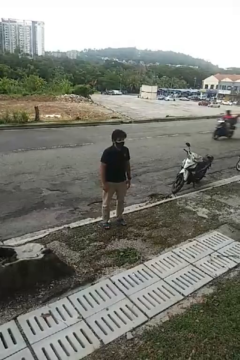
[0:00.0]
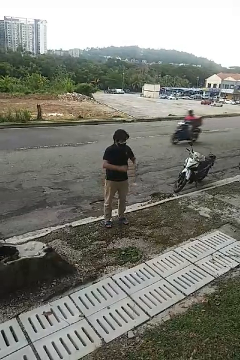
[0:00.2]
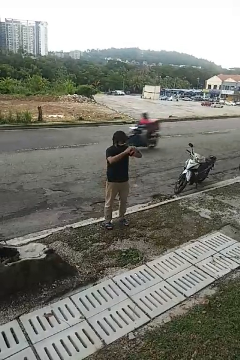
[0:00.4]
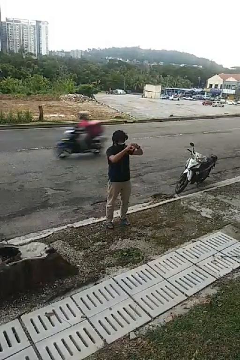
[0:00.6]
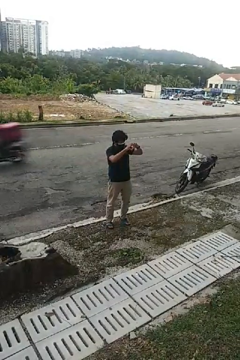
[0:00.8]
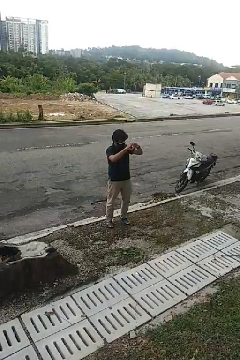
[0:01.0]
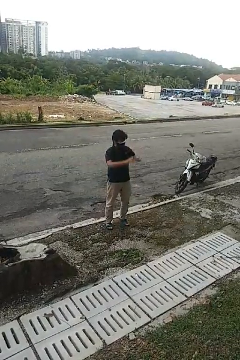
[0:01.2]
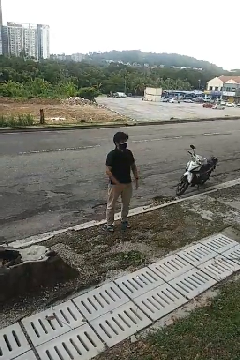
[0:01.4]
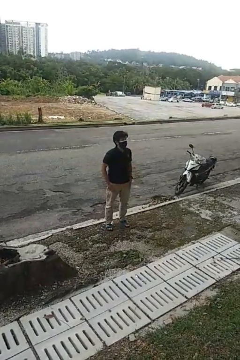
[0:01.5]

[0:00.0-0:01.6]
person gestures heart

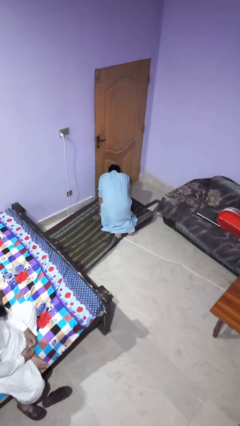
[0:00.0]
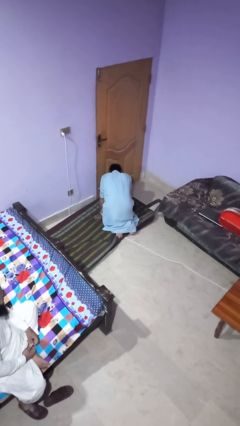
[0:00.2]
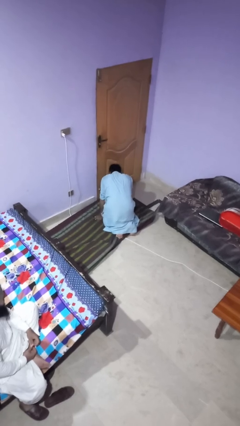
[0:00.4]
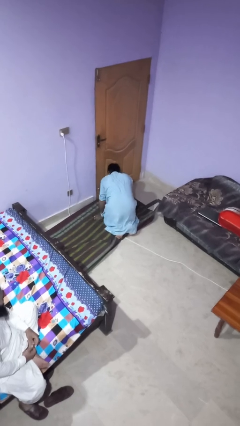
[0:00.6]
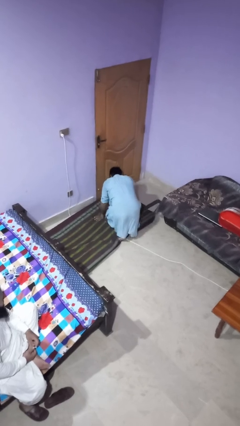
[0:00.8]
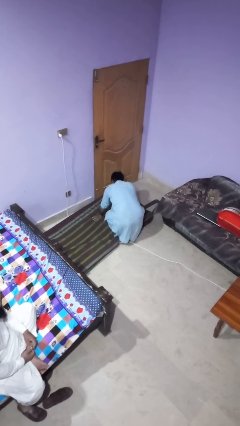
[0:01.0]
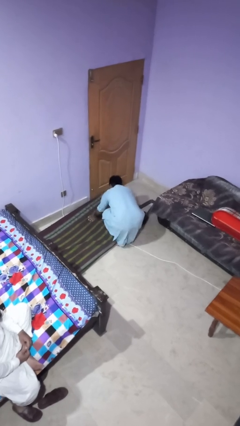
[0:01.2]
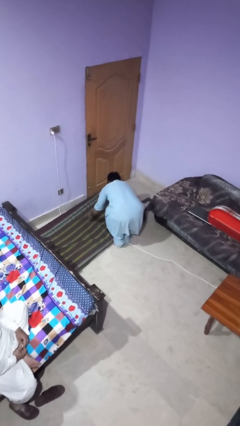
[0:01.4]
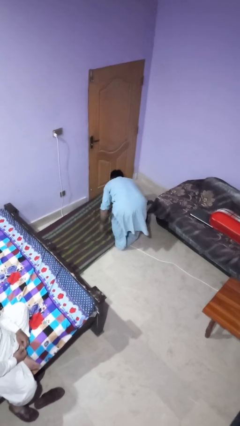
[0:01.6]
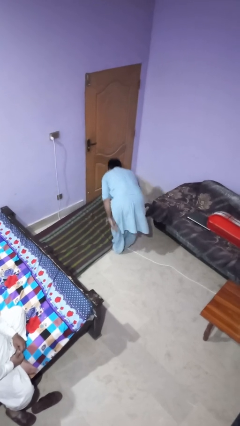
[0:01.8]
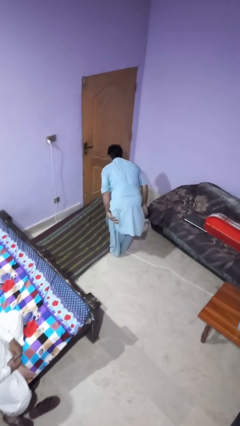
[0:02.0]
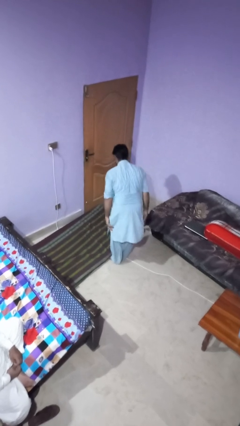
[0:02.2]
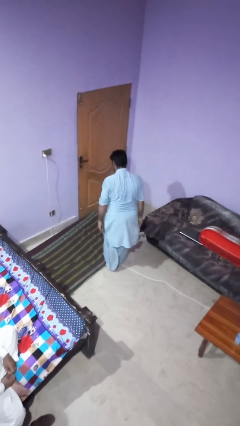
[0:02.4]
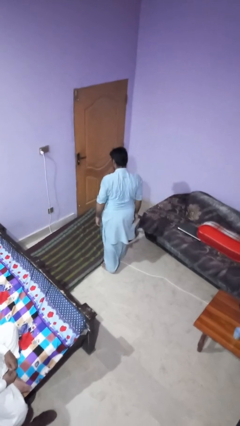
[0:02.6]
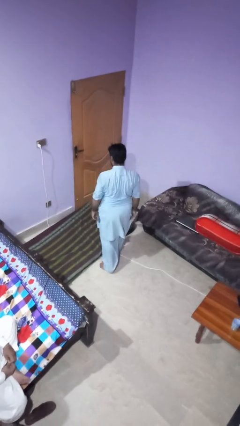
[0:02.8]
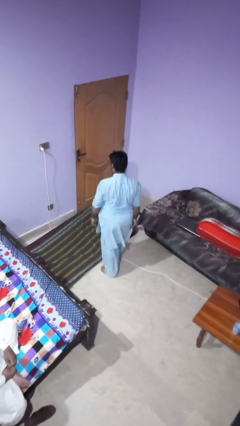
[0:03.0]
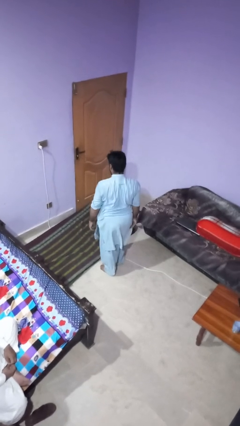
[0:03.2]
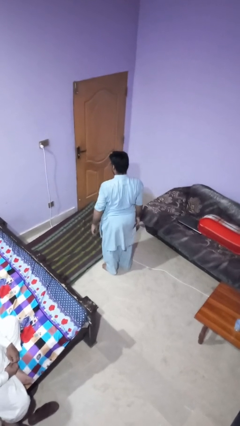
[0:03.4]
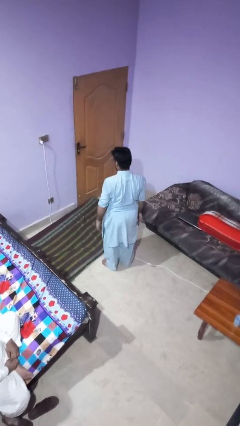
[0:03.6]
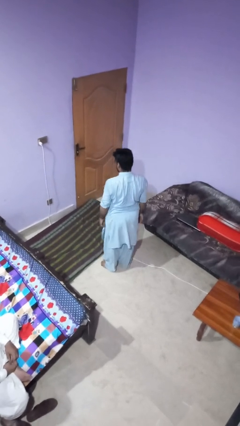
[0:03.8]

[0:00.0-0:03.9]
person stands up from floor

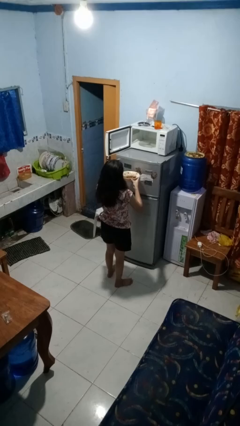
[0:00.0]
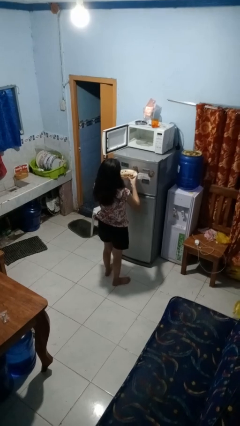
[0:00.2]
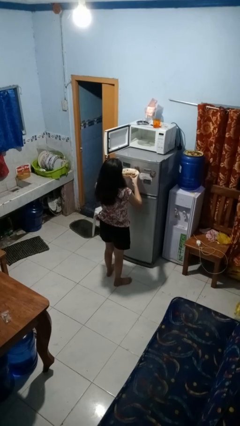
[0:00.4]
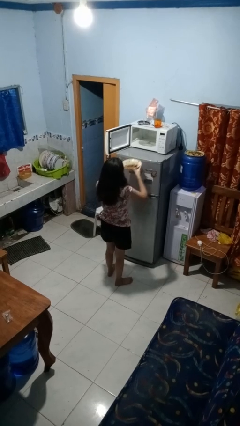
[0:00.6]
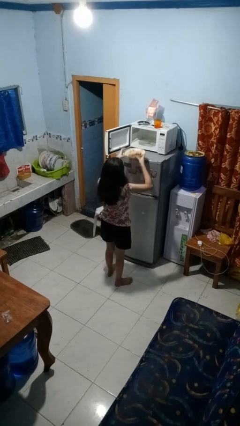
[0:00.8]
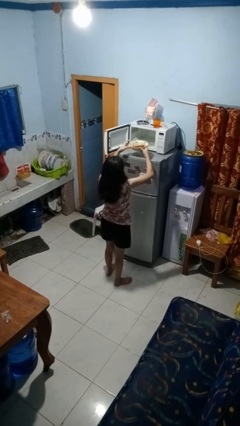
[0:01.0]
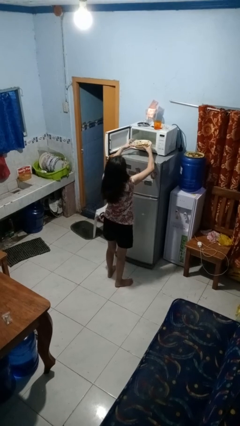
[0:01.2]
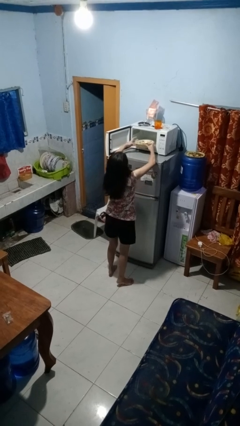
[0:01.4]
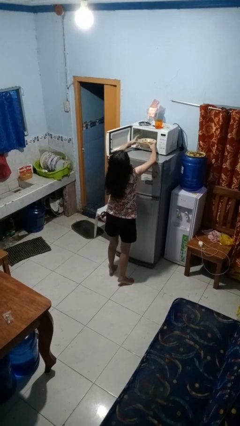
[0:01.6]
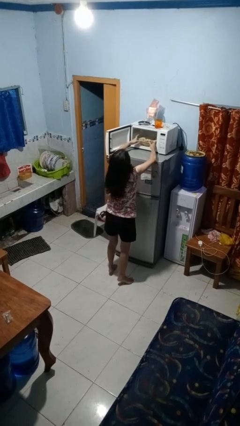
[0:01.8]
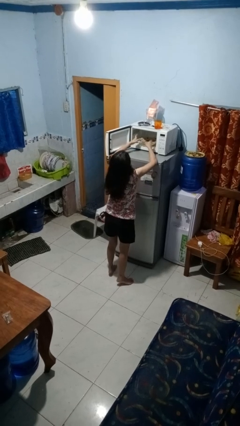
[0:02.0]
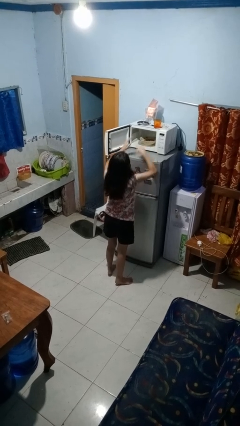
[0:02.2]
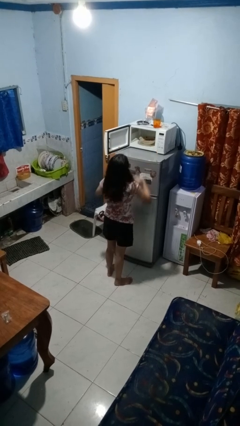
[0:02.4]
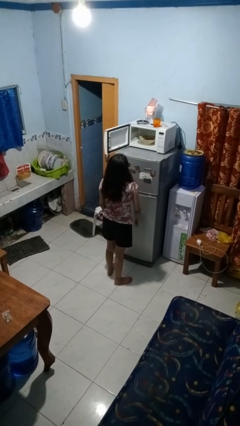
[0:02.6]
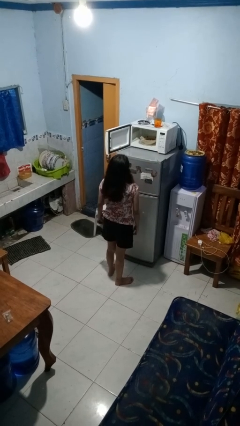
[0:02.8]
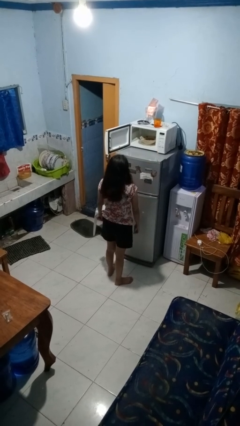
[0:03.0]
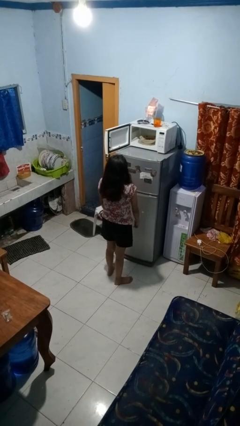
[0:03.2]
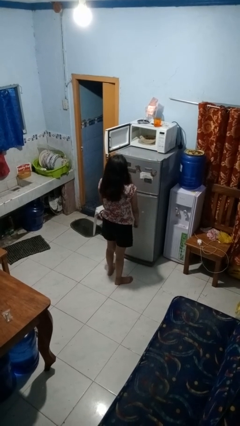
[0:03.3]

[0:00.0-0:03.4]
person puts object into microwave

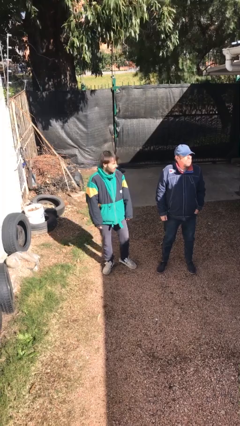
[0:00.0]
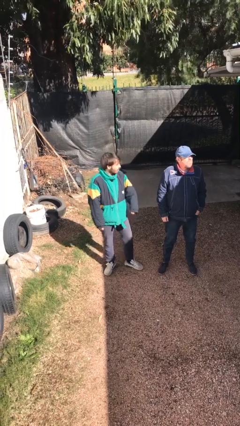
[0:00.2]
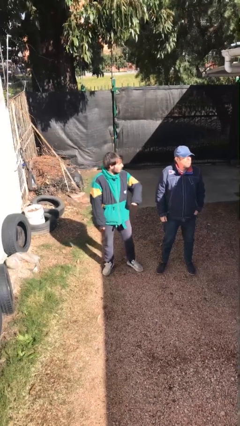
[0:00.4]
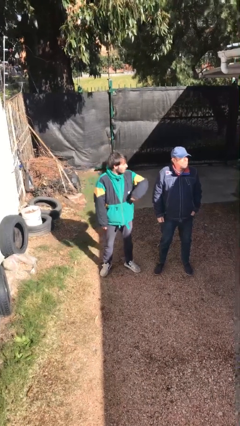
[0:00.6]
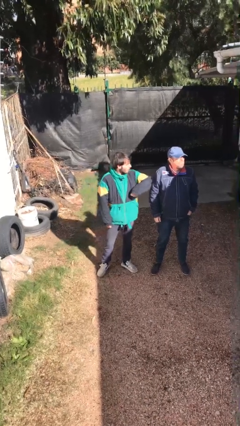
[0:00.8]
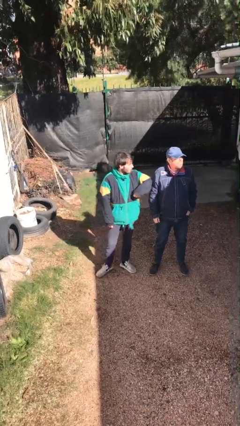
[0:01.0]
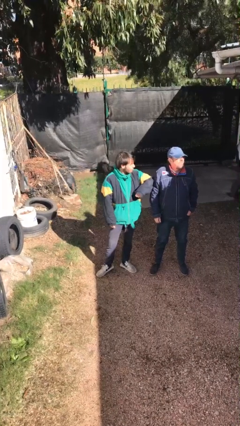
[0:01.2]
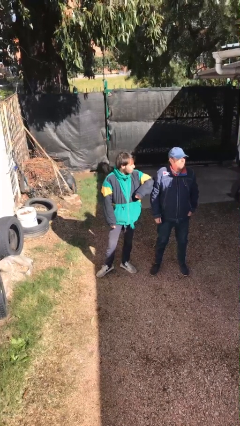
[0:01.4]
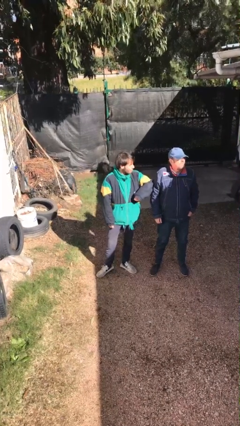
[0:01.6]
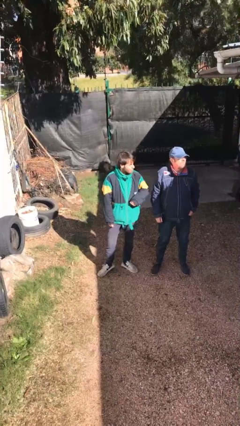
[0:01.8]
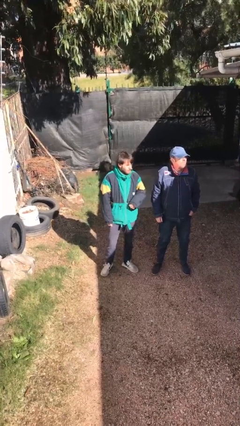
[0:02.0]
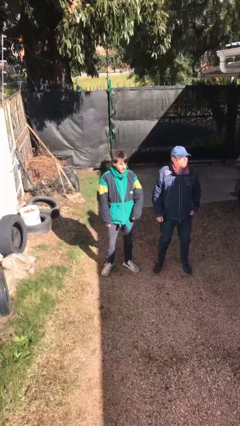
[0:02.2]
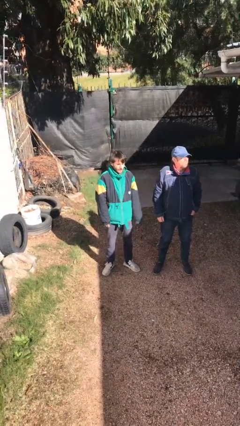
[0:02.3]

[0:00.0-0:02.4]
person nudges person with elbow

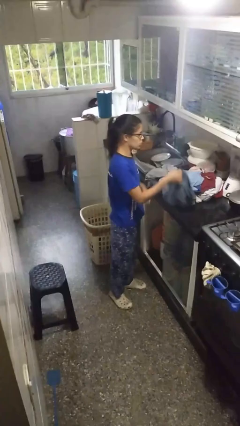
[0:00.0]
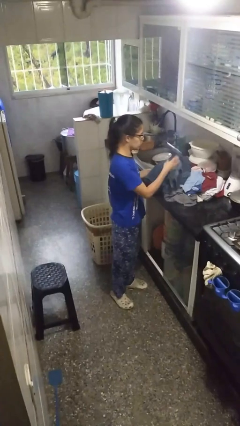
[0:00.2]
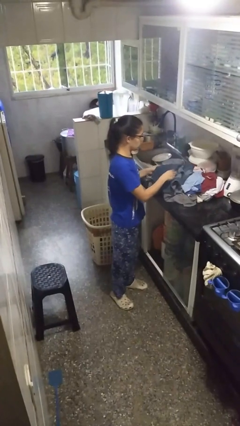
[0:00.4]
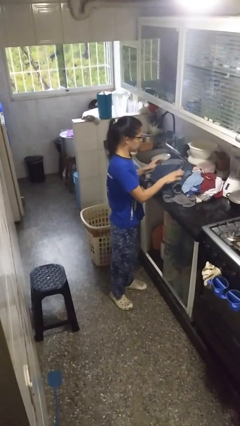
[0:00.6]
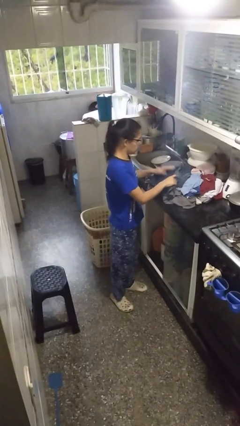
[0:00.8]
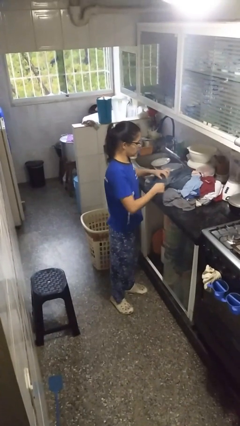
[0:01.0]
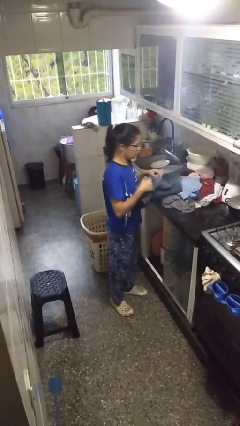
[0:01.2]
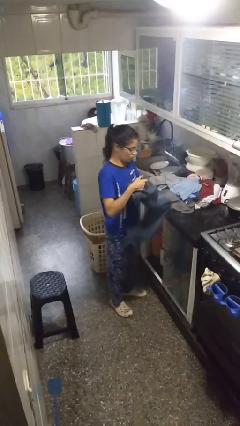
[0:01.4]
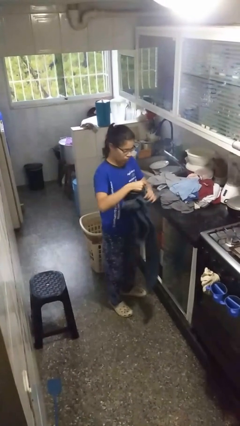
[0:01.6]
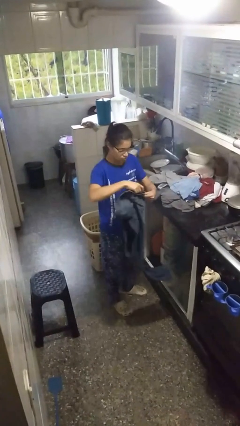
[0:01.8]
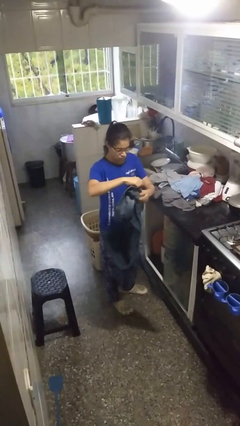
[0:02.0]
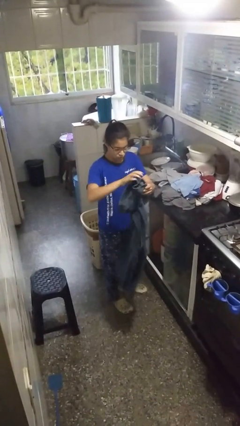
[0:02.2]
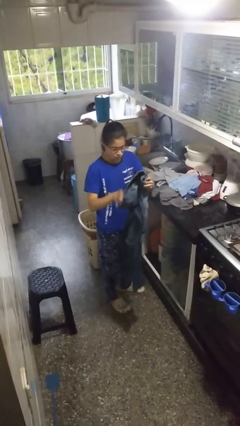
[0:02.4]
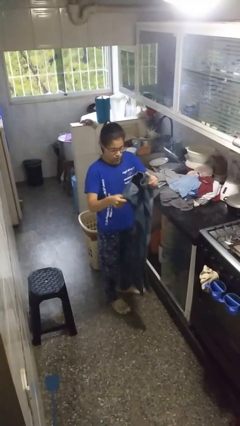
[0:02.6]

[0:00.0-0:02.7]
person folds pants

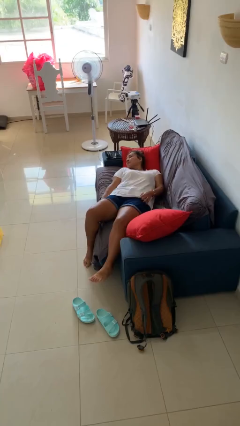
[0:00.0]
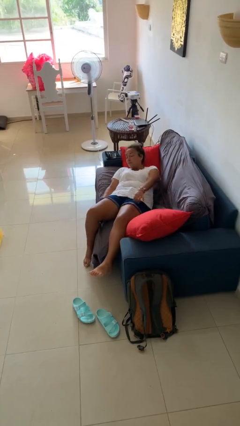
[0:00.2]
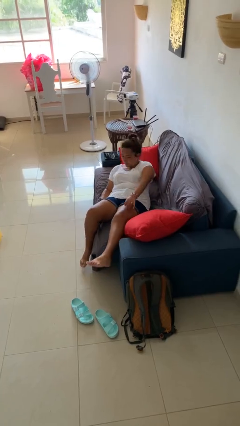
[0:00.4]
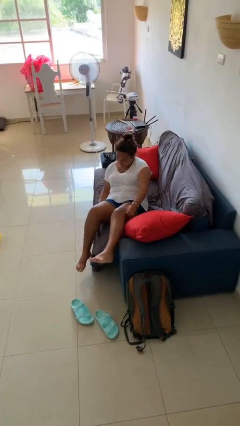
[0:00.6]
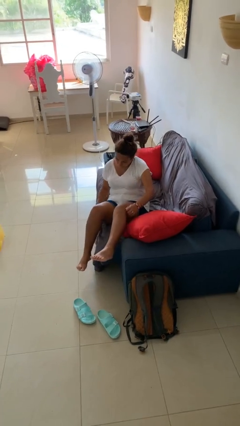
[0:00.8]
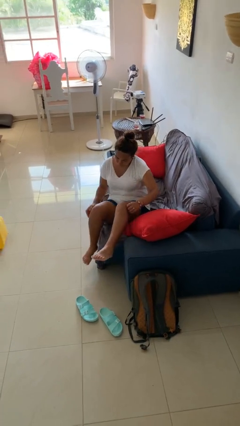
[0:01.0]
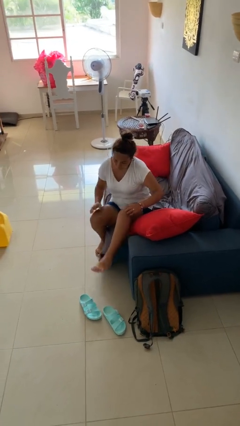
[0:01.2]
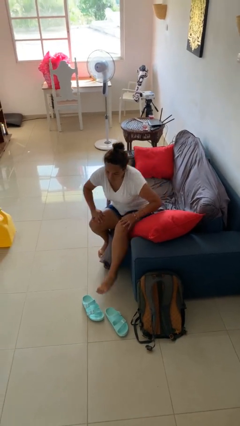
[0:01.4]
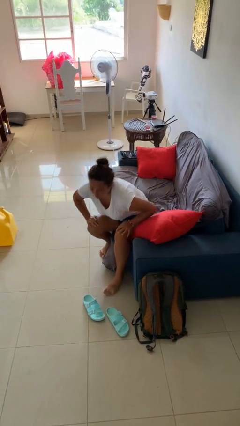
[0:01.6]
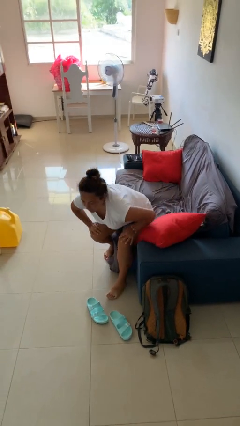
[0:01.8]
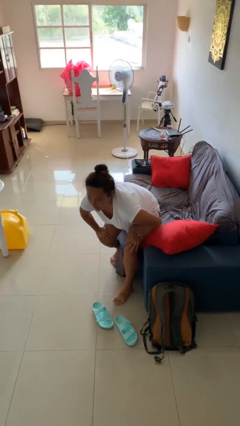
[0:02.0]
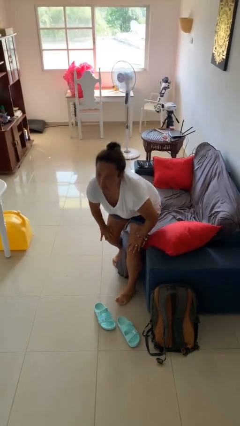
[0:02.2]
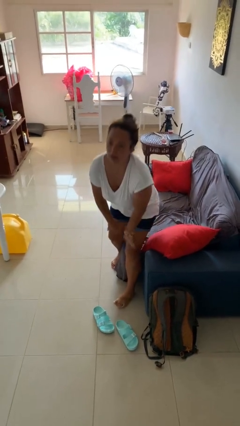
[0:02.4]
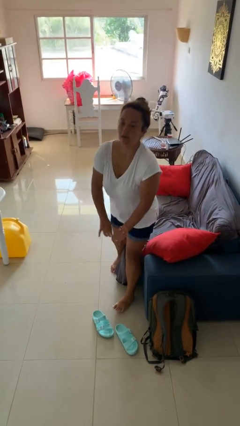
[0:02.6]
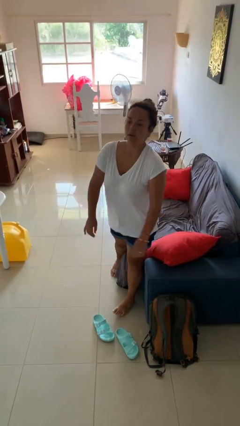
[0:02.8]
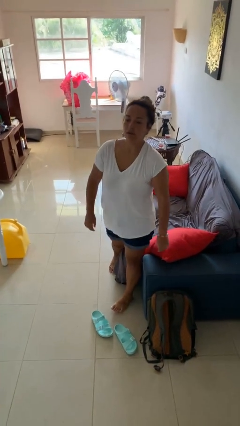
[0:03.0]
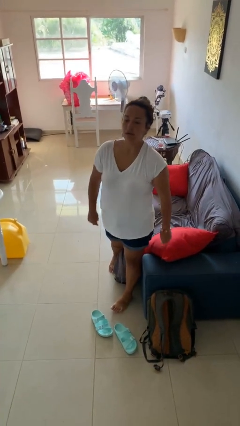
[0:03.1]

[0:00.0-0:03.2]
person stands up

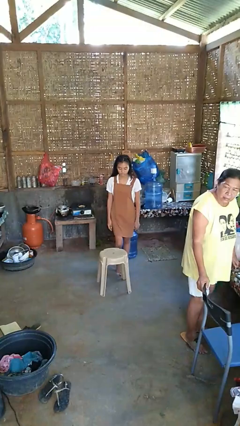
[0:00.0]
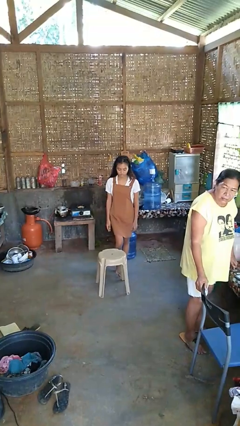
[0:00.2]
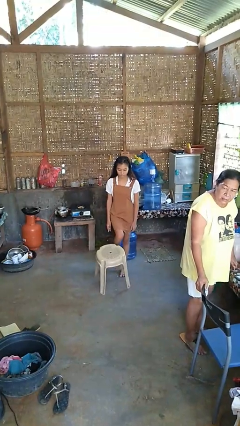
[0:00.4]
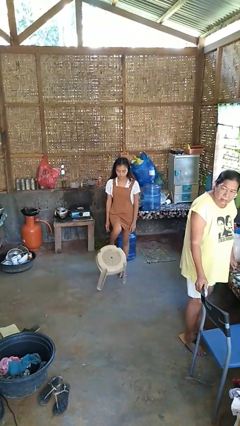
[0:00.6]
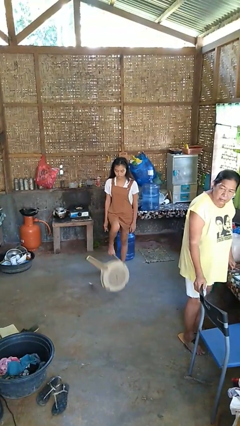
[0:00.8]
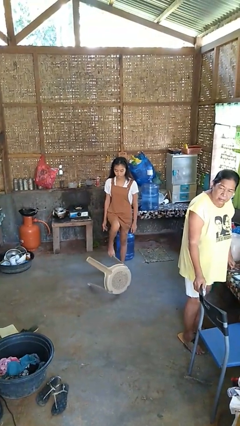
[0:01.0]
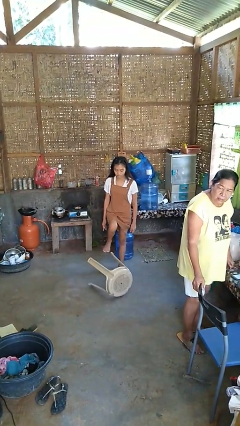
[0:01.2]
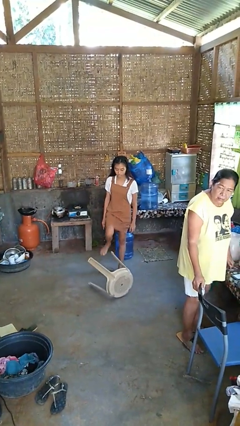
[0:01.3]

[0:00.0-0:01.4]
person knocks over furniture
